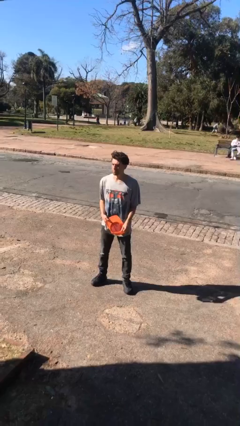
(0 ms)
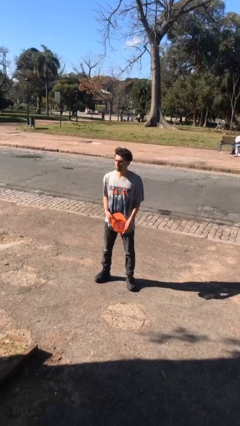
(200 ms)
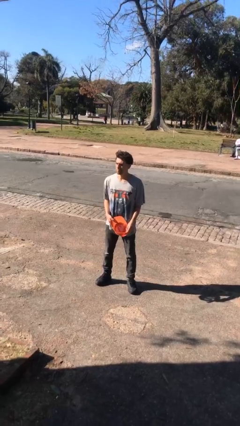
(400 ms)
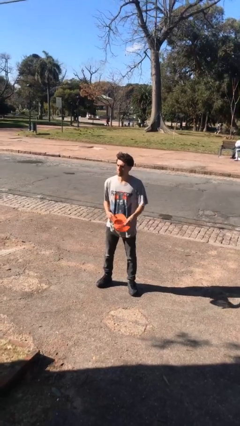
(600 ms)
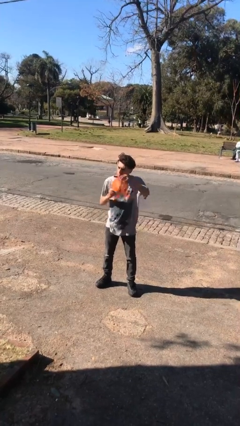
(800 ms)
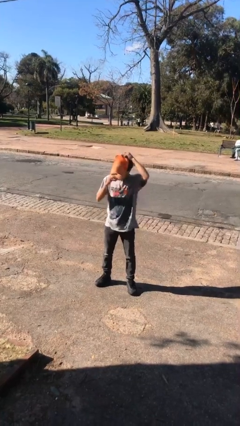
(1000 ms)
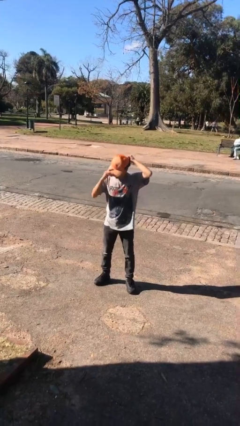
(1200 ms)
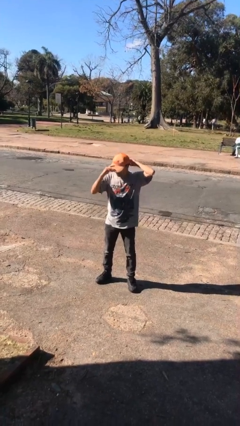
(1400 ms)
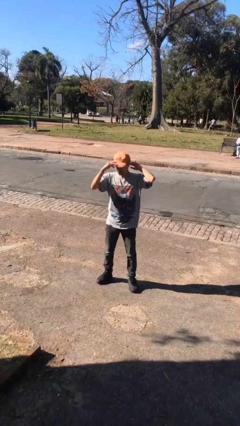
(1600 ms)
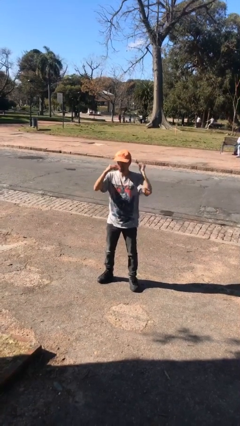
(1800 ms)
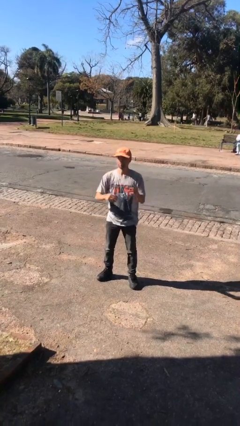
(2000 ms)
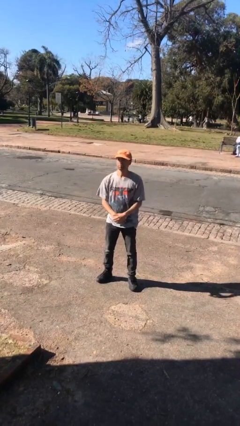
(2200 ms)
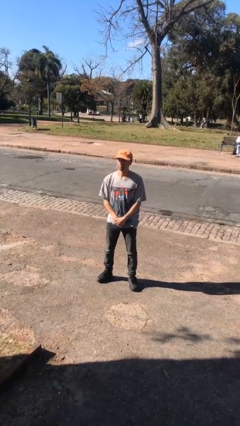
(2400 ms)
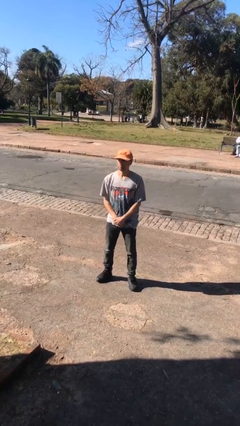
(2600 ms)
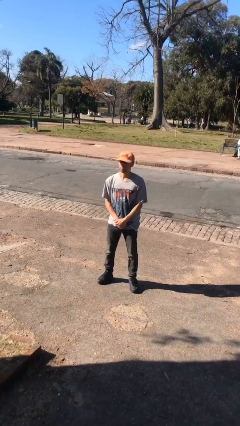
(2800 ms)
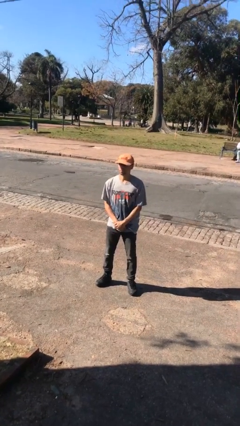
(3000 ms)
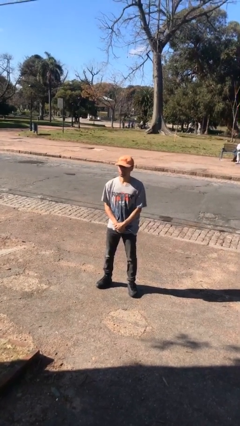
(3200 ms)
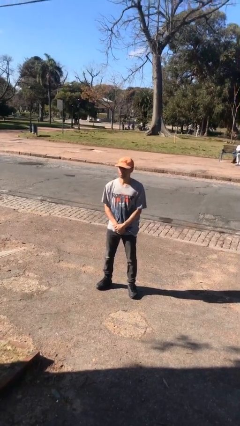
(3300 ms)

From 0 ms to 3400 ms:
person puts on hat

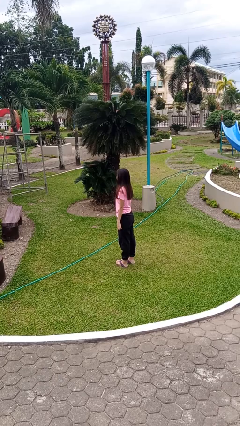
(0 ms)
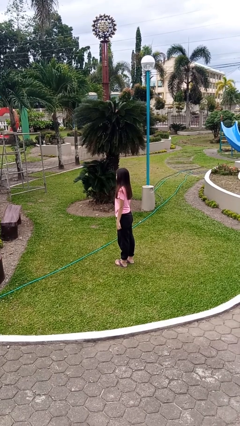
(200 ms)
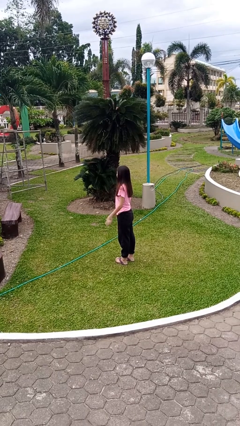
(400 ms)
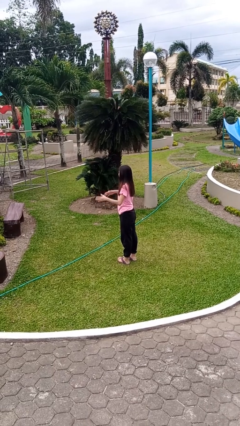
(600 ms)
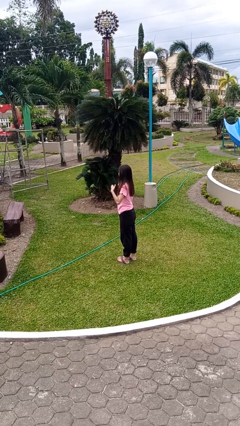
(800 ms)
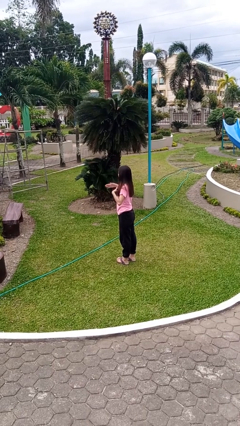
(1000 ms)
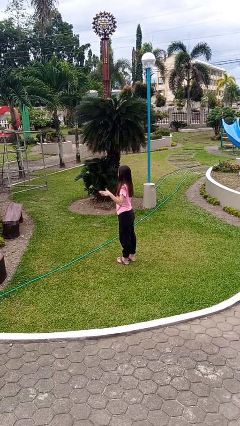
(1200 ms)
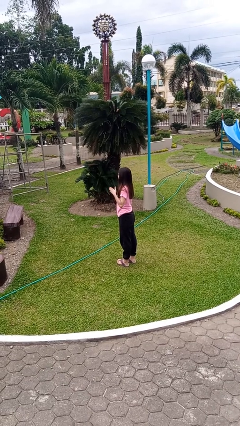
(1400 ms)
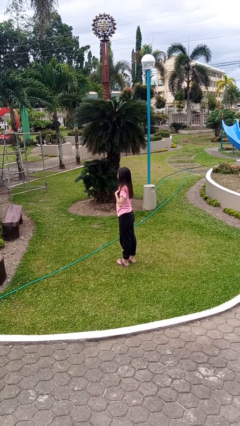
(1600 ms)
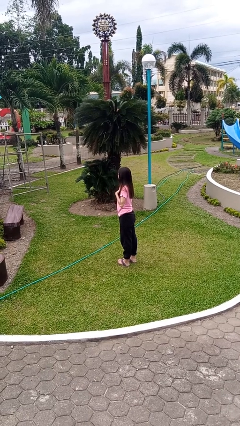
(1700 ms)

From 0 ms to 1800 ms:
person drums on chest

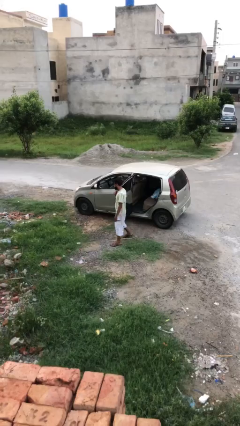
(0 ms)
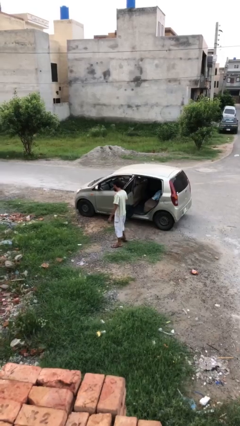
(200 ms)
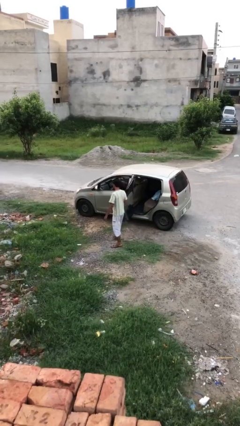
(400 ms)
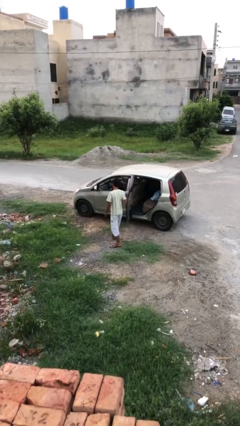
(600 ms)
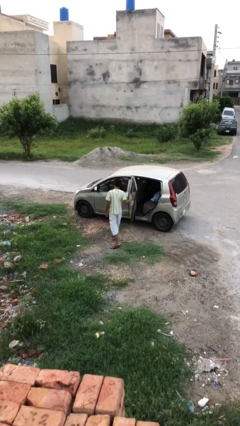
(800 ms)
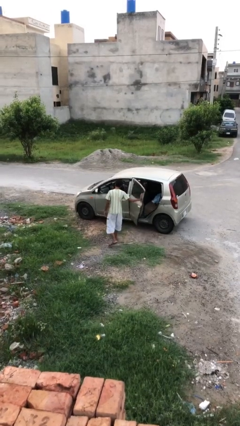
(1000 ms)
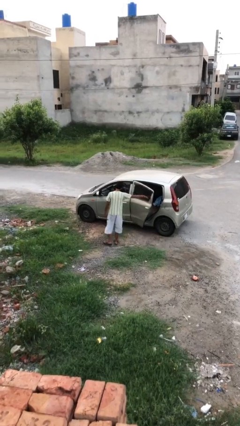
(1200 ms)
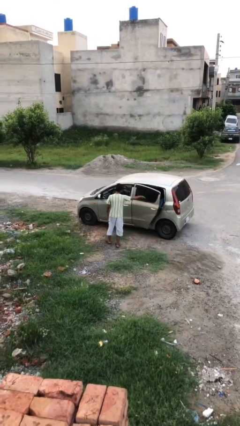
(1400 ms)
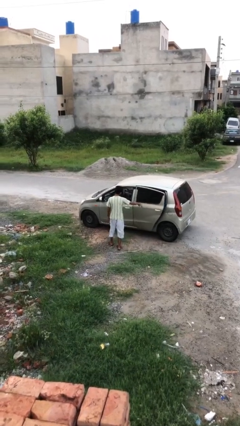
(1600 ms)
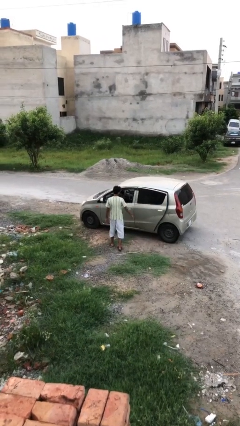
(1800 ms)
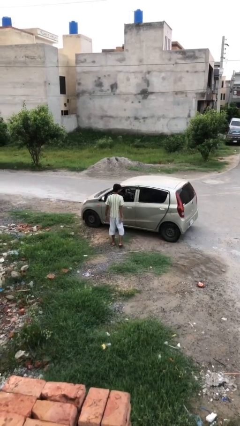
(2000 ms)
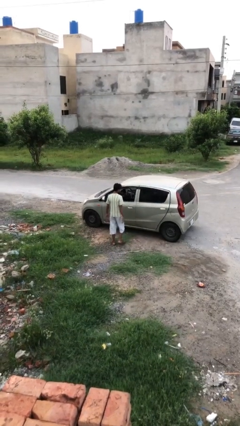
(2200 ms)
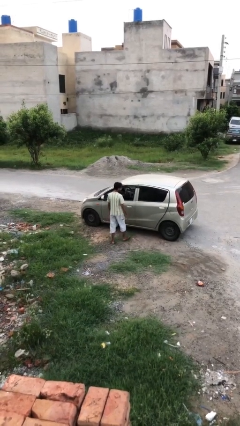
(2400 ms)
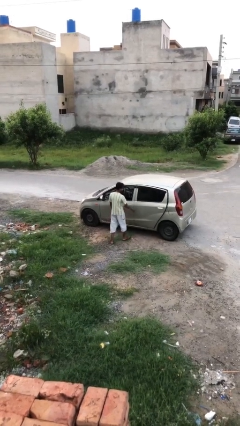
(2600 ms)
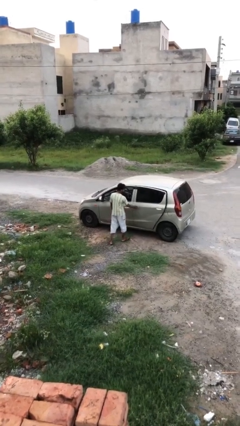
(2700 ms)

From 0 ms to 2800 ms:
person closes car door

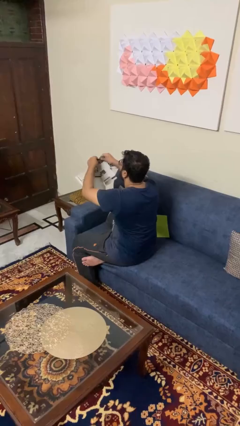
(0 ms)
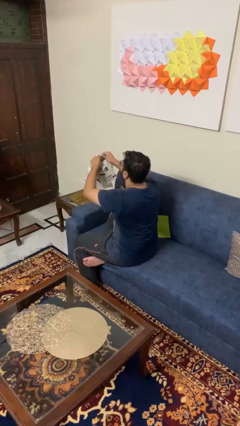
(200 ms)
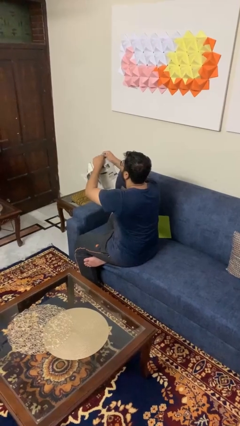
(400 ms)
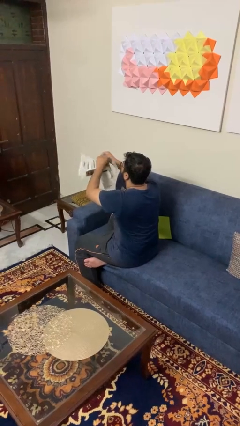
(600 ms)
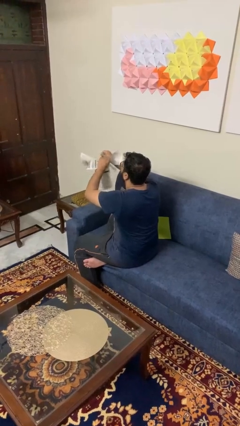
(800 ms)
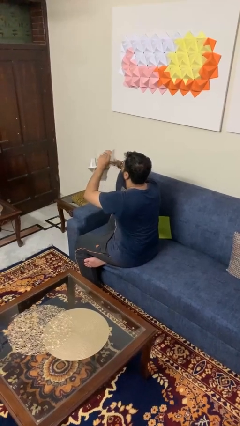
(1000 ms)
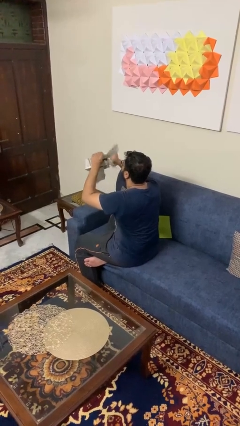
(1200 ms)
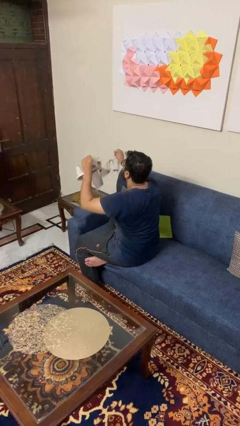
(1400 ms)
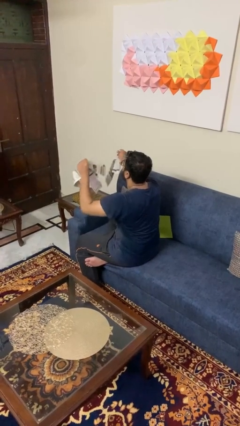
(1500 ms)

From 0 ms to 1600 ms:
person tears paper

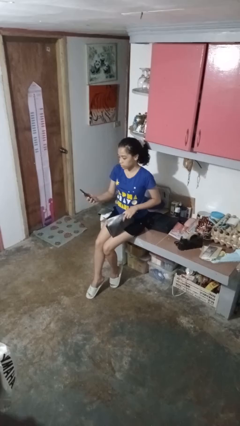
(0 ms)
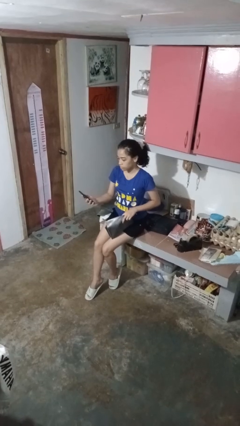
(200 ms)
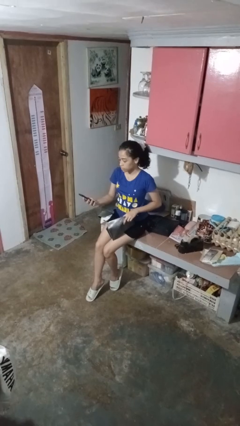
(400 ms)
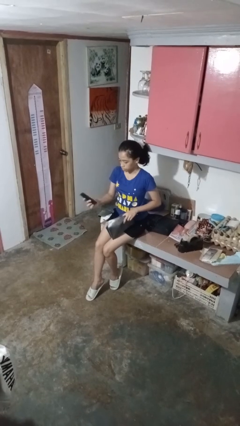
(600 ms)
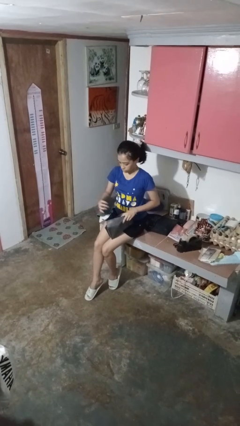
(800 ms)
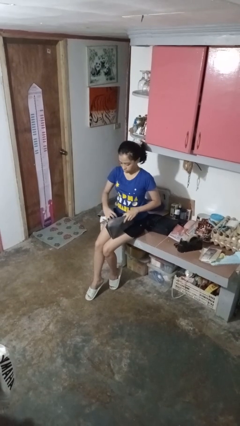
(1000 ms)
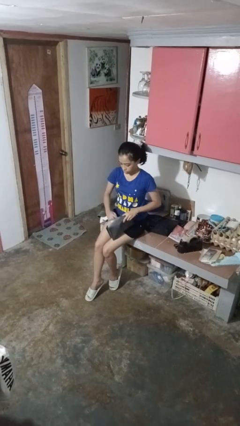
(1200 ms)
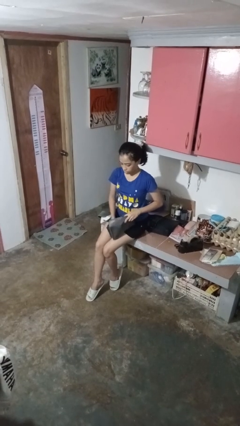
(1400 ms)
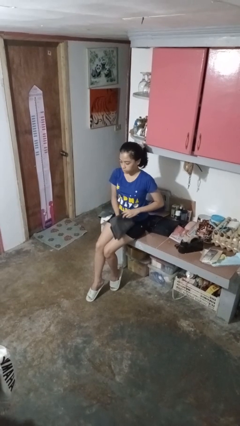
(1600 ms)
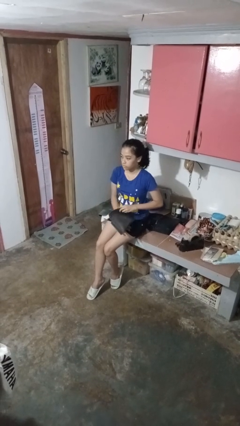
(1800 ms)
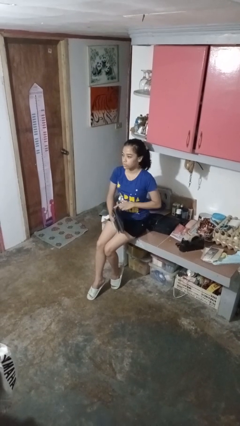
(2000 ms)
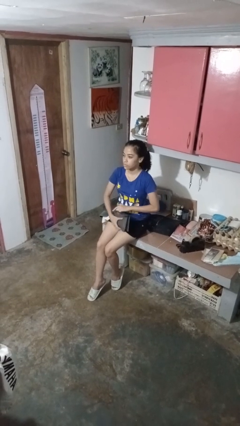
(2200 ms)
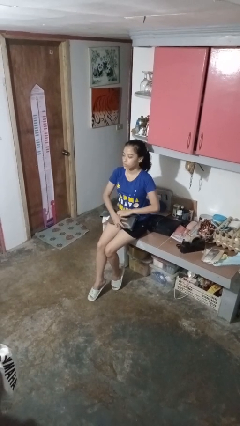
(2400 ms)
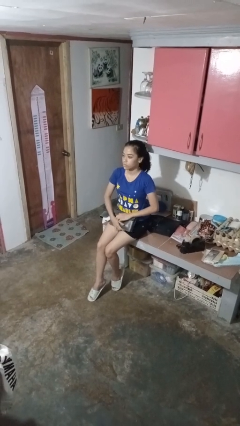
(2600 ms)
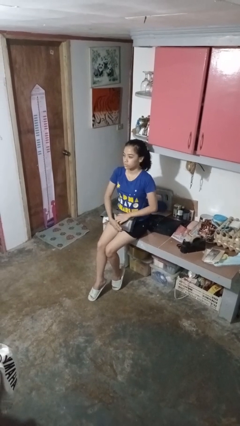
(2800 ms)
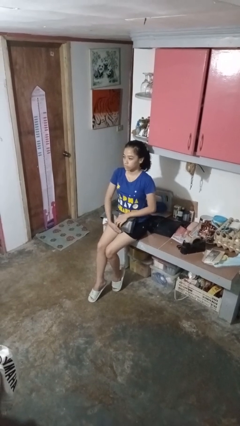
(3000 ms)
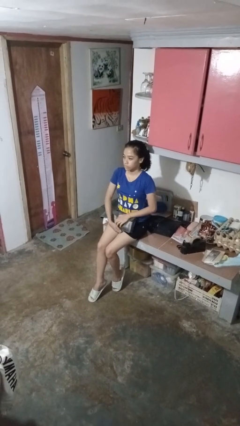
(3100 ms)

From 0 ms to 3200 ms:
person puts object into purse

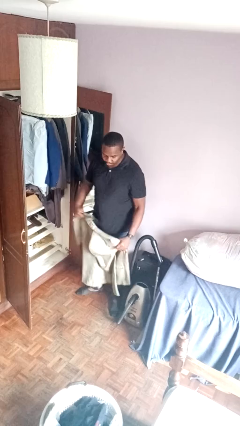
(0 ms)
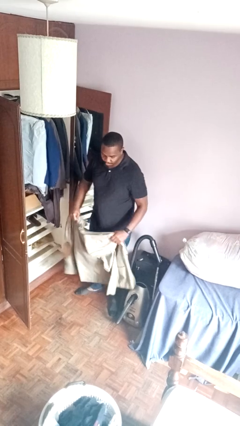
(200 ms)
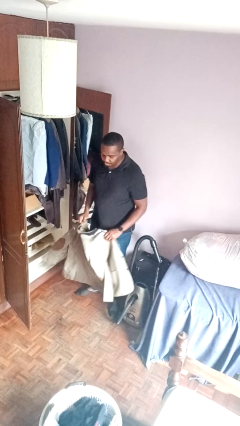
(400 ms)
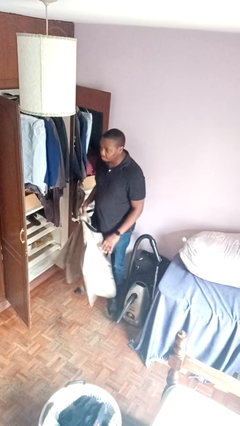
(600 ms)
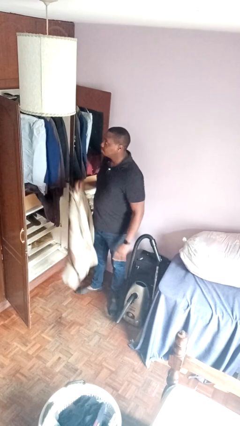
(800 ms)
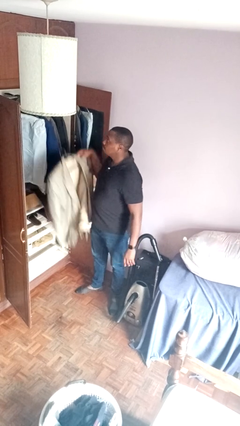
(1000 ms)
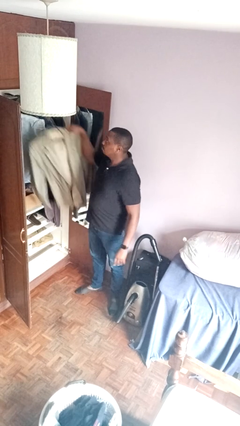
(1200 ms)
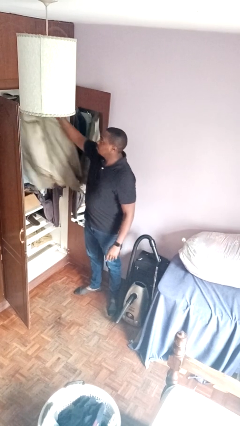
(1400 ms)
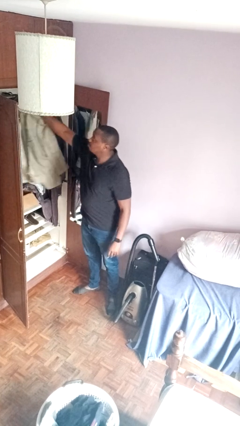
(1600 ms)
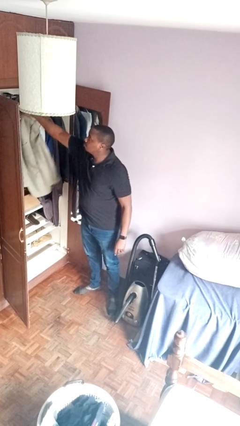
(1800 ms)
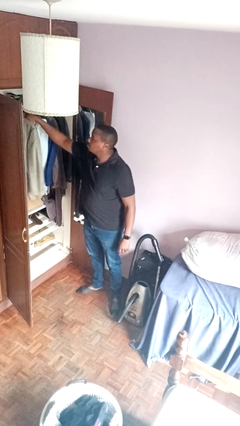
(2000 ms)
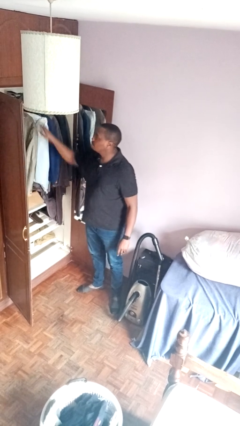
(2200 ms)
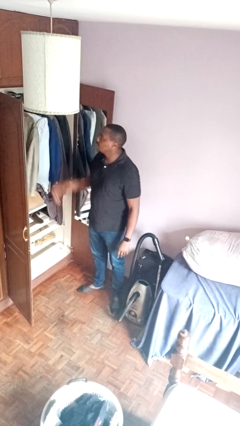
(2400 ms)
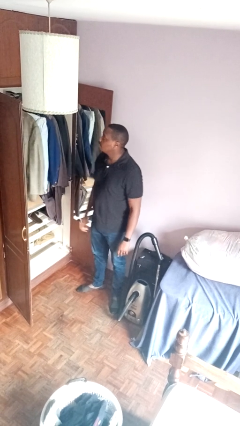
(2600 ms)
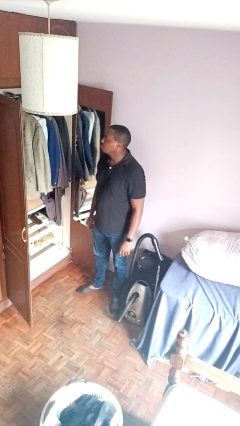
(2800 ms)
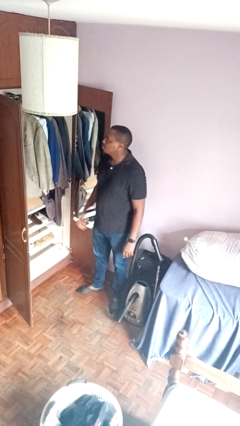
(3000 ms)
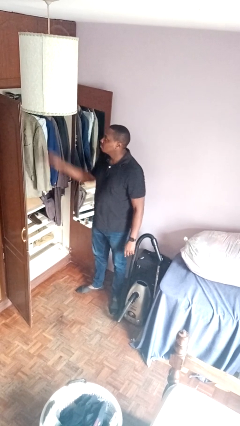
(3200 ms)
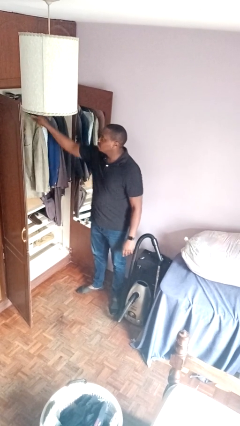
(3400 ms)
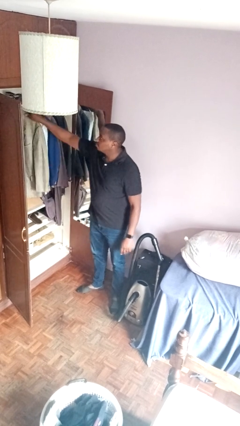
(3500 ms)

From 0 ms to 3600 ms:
person puts clothes into closet

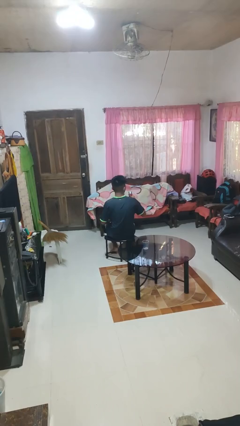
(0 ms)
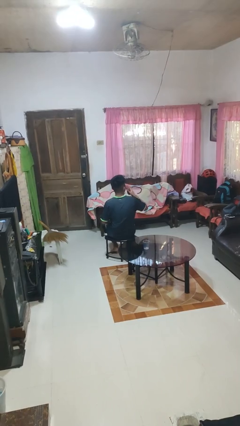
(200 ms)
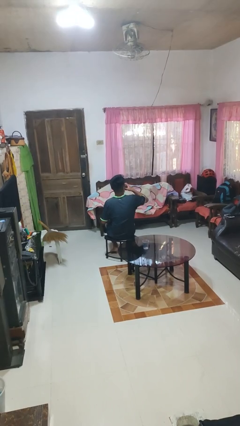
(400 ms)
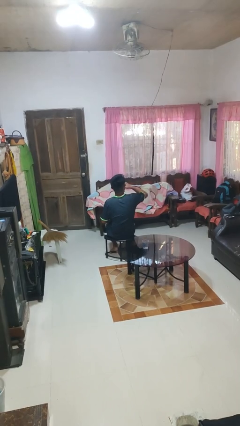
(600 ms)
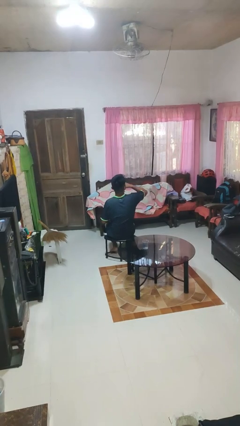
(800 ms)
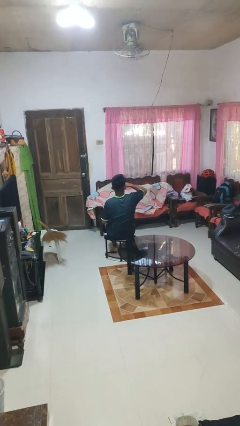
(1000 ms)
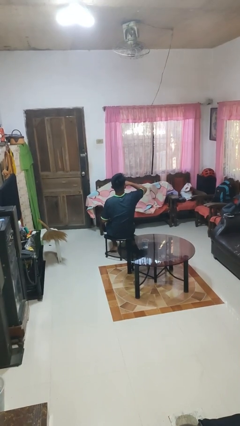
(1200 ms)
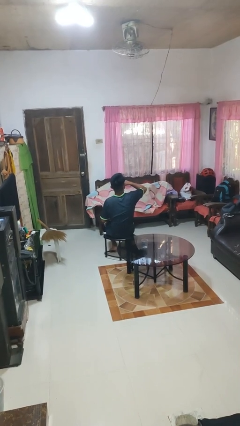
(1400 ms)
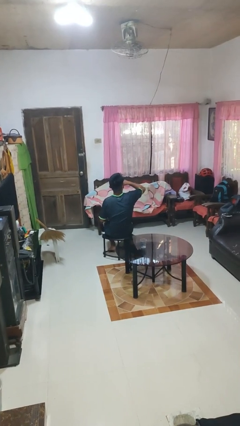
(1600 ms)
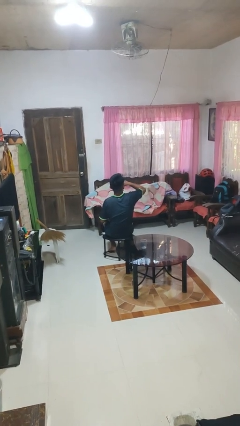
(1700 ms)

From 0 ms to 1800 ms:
person drinks from beverage can
